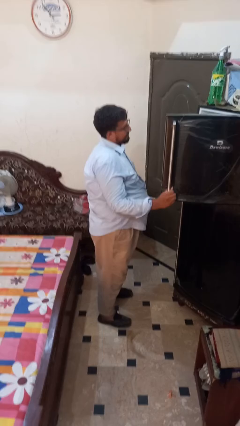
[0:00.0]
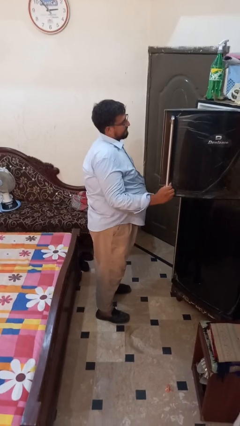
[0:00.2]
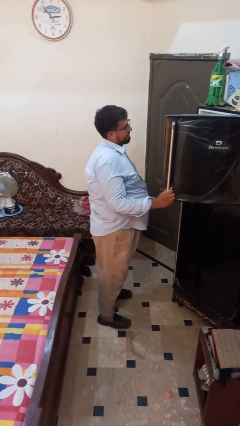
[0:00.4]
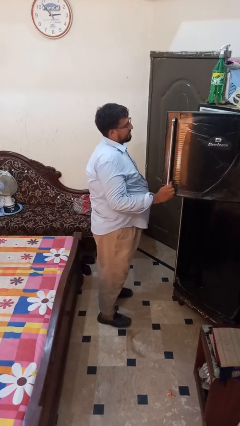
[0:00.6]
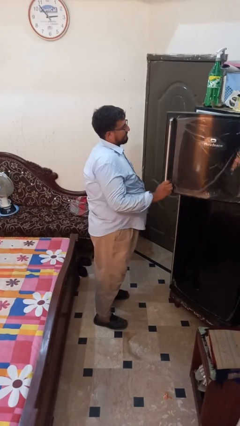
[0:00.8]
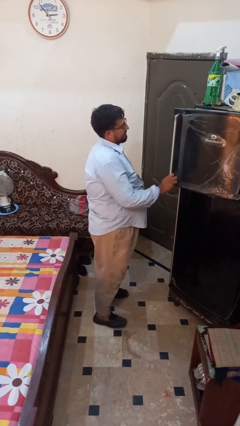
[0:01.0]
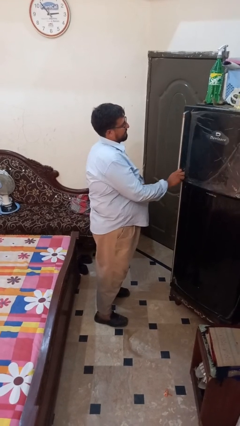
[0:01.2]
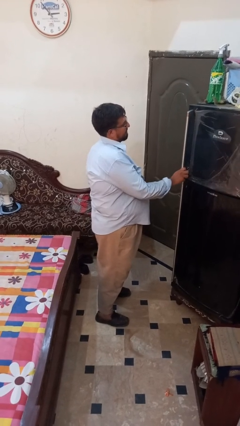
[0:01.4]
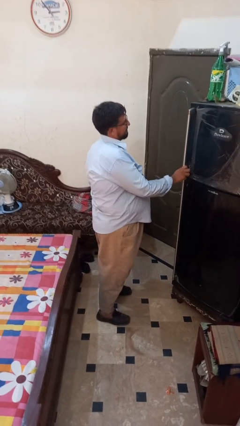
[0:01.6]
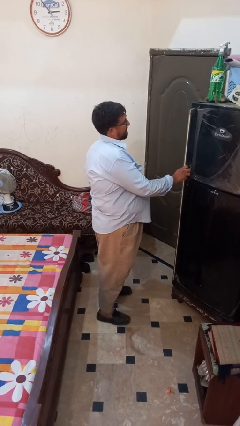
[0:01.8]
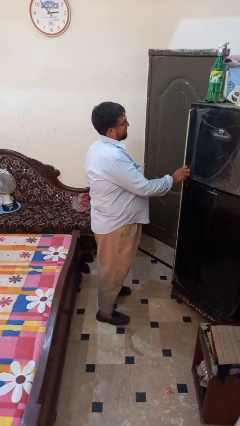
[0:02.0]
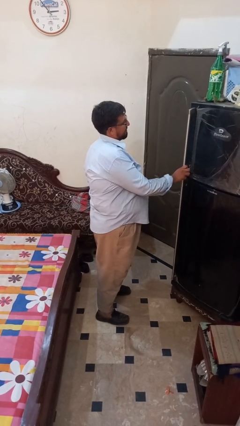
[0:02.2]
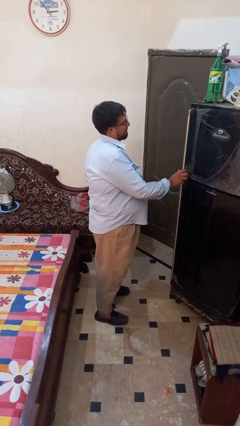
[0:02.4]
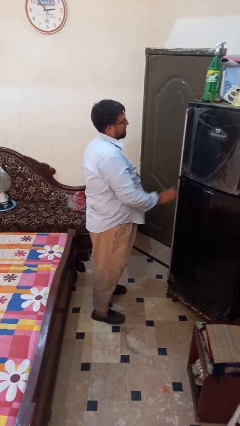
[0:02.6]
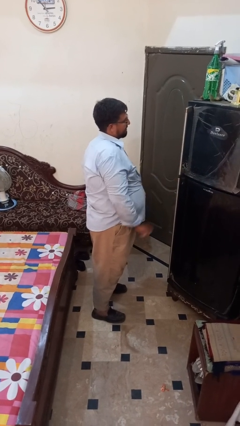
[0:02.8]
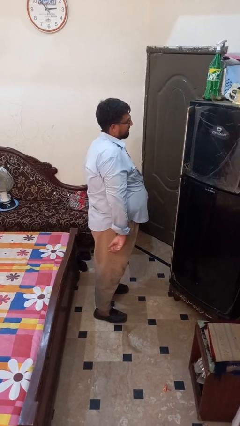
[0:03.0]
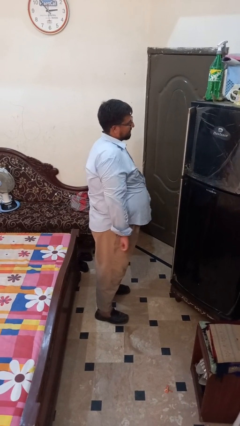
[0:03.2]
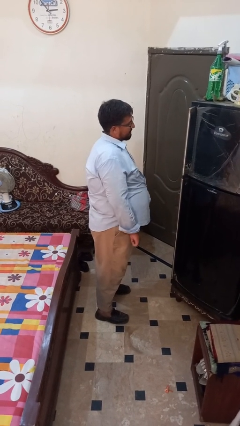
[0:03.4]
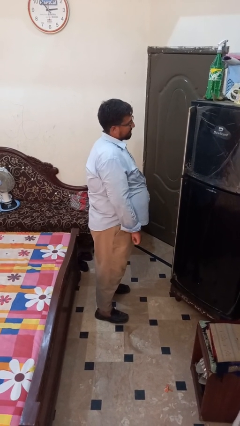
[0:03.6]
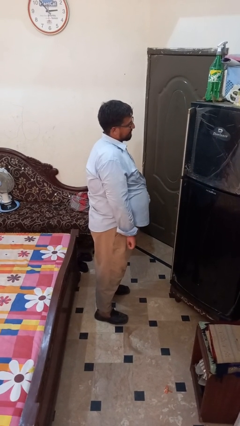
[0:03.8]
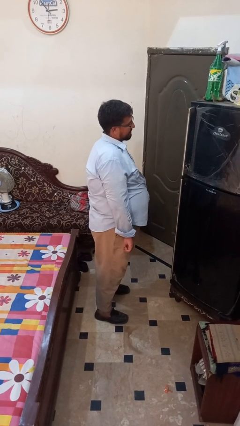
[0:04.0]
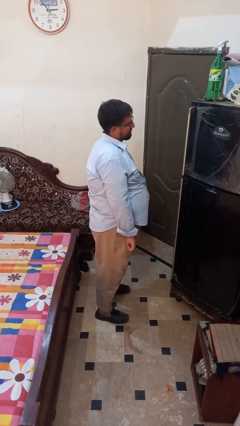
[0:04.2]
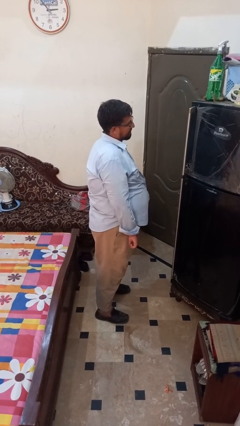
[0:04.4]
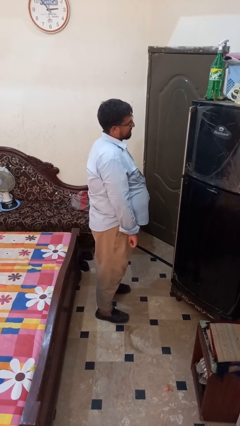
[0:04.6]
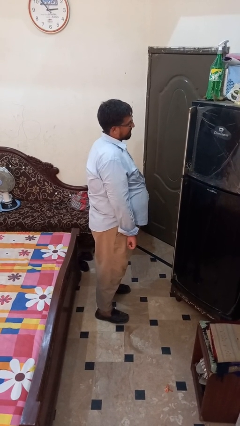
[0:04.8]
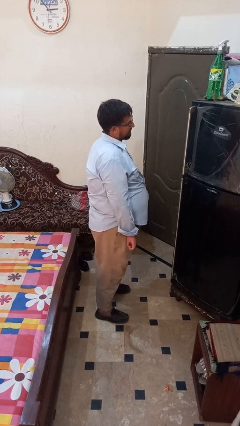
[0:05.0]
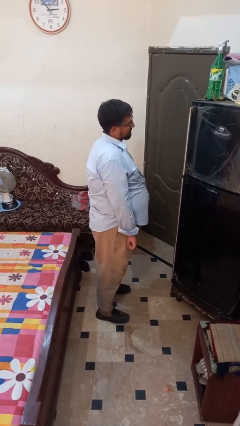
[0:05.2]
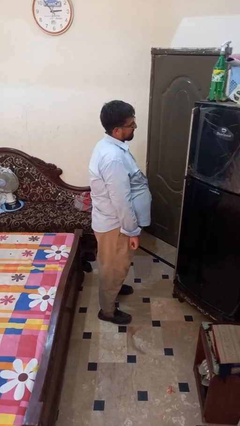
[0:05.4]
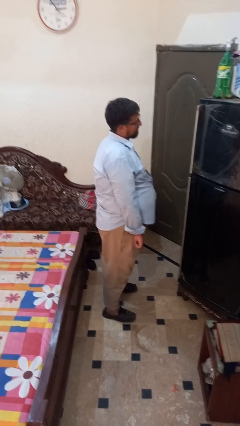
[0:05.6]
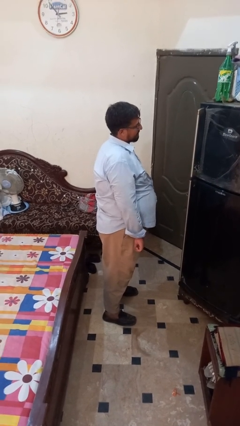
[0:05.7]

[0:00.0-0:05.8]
person closes refrigerator

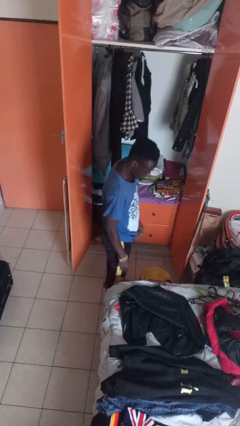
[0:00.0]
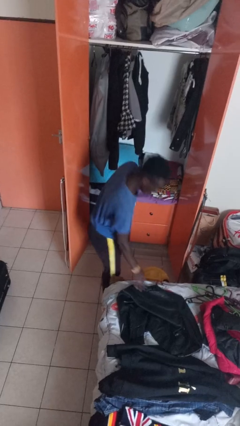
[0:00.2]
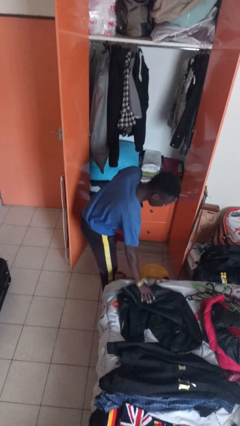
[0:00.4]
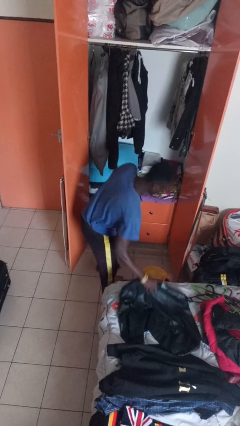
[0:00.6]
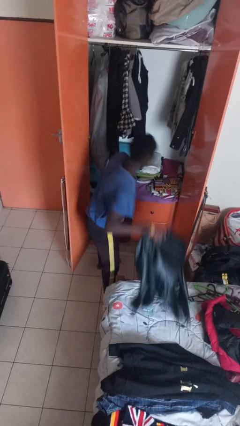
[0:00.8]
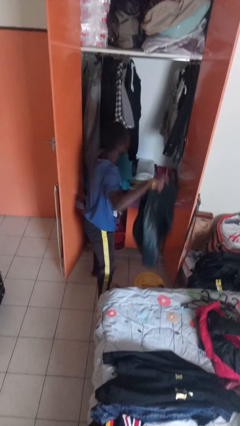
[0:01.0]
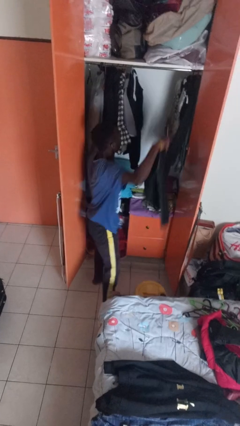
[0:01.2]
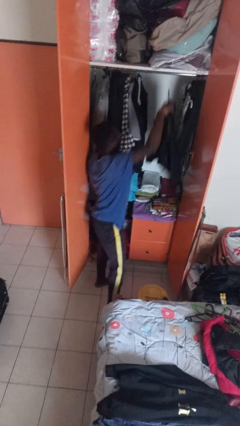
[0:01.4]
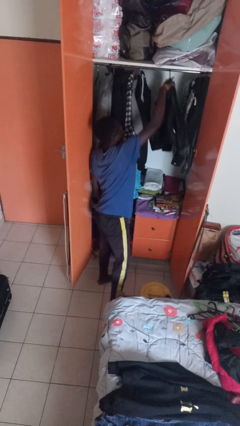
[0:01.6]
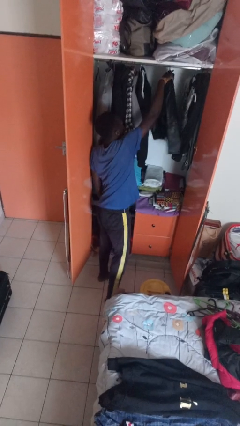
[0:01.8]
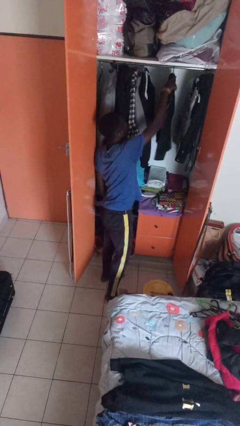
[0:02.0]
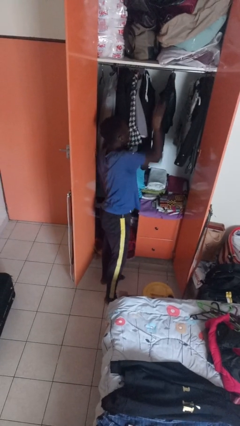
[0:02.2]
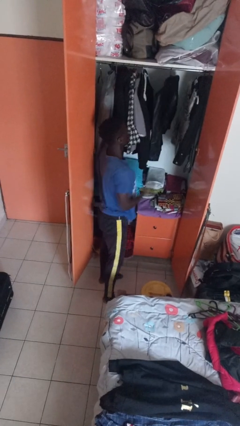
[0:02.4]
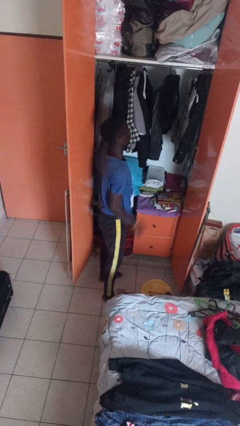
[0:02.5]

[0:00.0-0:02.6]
person puts clothes into closet

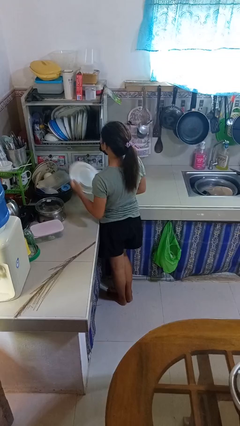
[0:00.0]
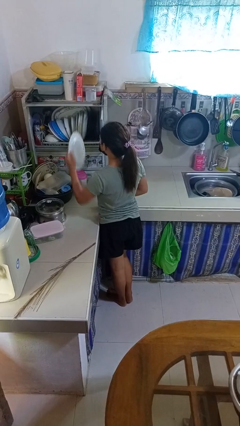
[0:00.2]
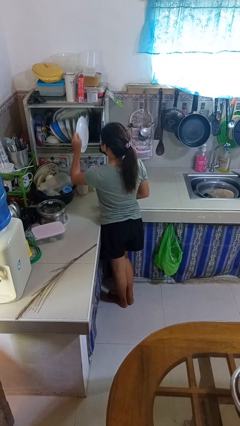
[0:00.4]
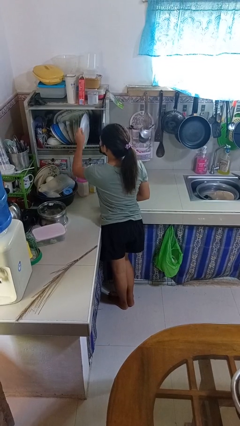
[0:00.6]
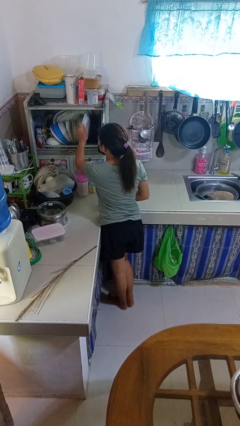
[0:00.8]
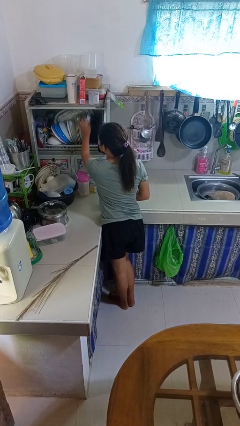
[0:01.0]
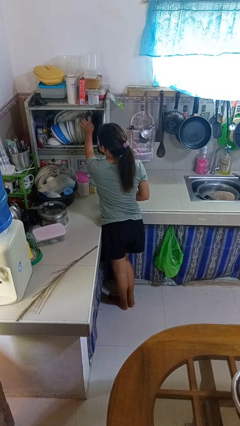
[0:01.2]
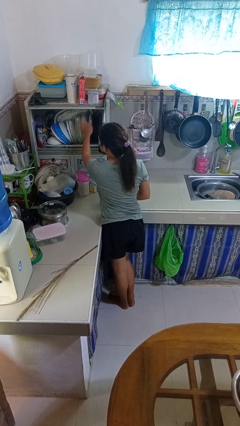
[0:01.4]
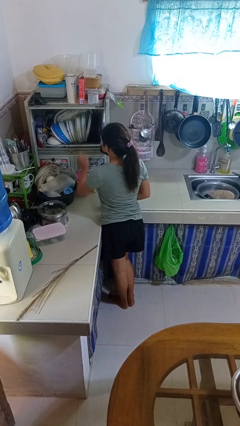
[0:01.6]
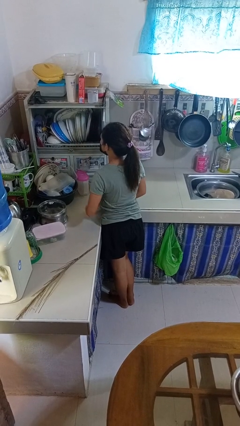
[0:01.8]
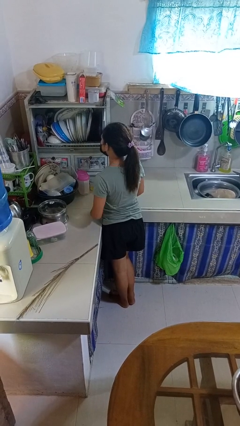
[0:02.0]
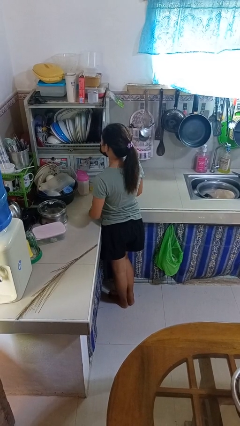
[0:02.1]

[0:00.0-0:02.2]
person puts object into kitchen drawer

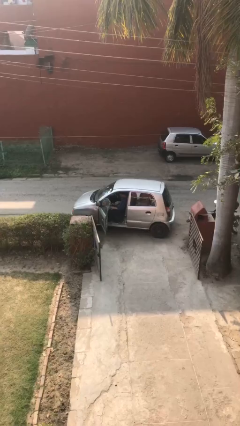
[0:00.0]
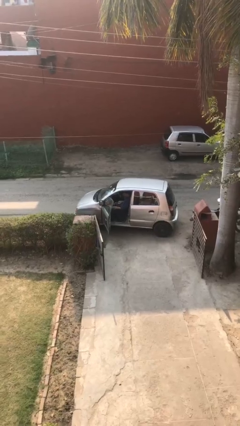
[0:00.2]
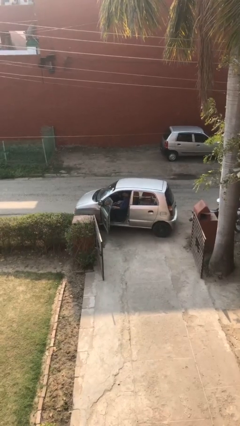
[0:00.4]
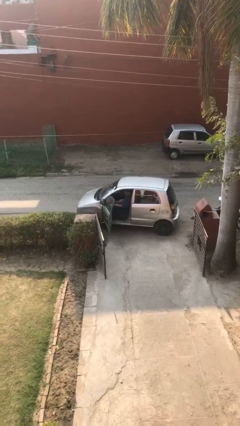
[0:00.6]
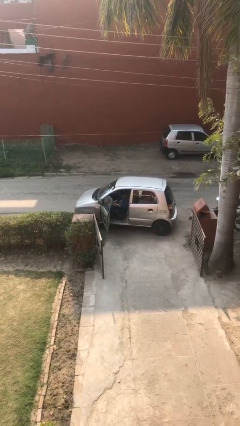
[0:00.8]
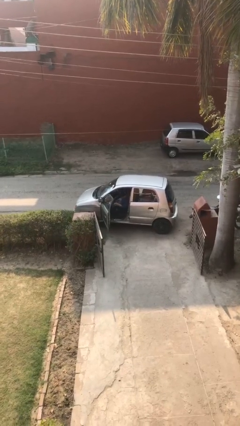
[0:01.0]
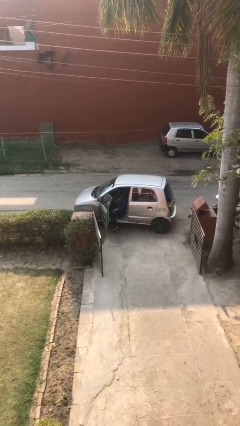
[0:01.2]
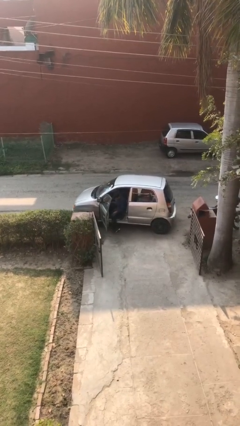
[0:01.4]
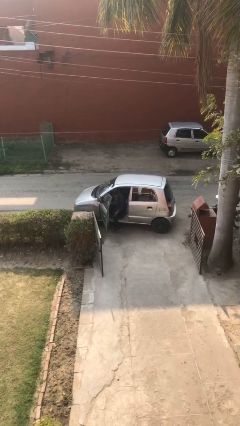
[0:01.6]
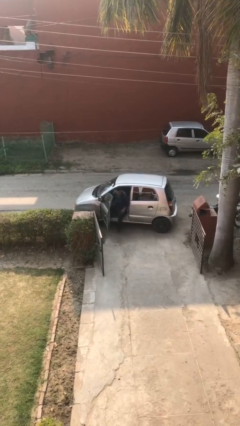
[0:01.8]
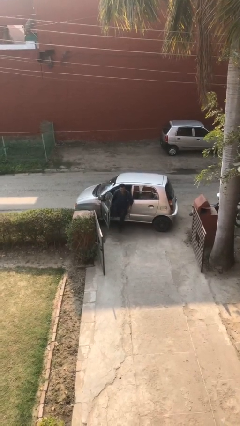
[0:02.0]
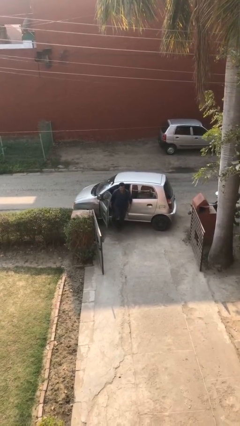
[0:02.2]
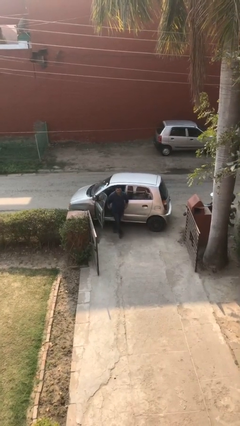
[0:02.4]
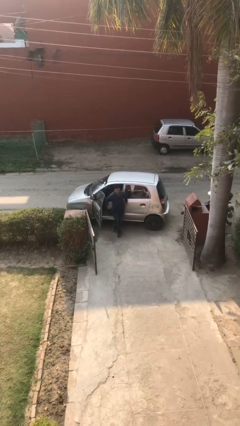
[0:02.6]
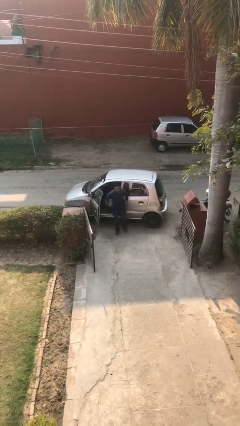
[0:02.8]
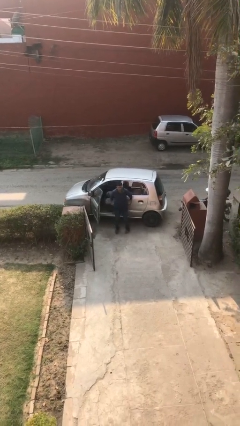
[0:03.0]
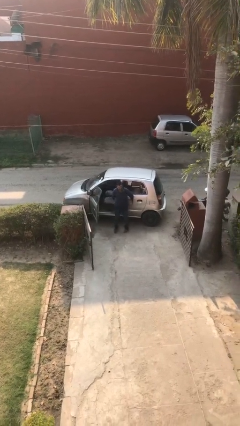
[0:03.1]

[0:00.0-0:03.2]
person exits car

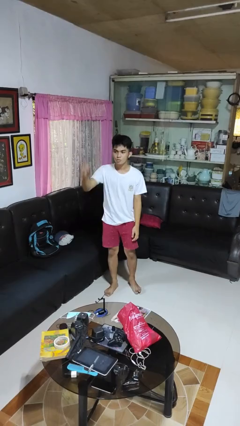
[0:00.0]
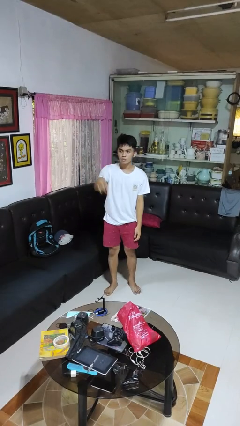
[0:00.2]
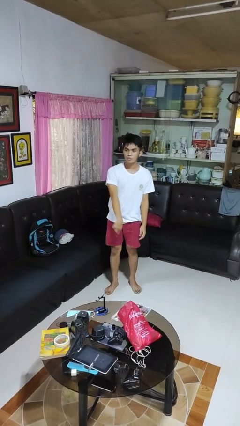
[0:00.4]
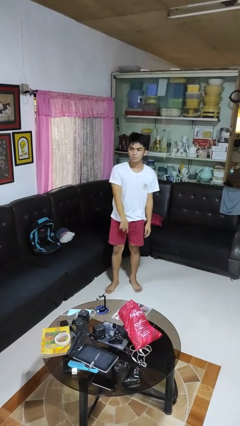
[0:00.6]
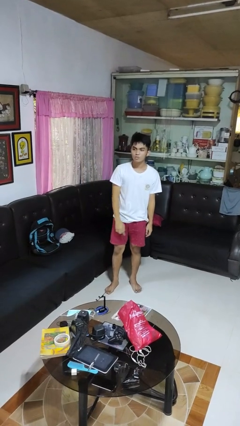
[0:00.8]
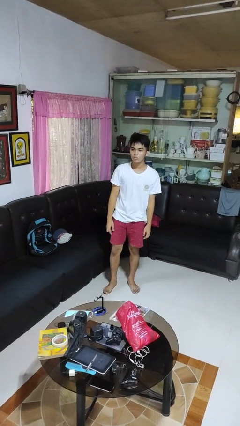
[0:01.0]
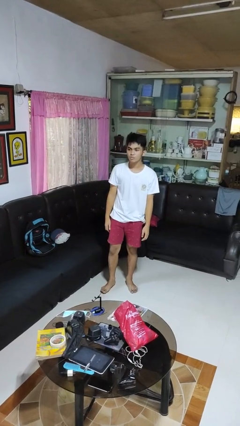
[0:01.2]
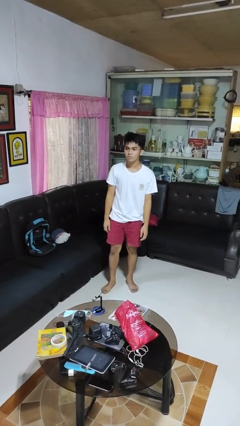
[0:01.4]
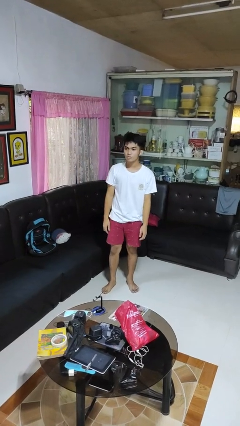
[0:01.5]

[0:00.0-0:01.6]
person gestures swipe down

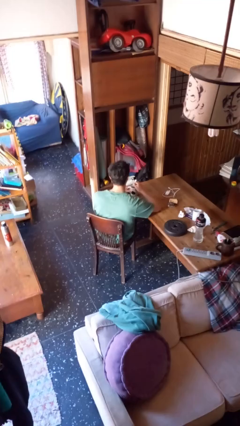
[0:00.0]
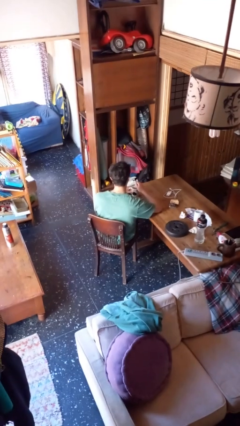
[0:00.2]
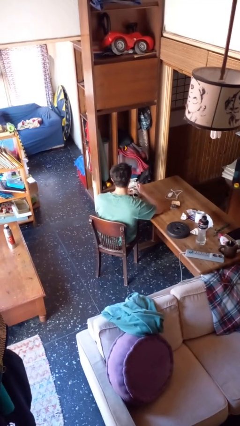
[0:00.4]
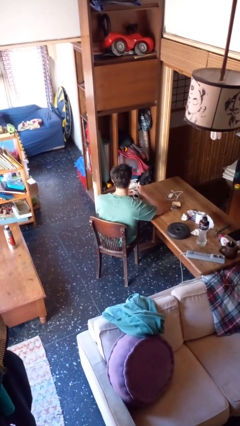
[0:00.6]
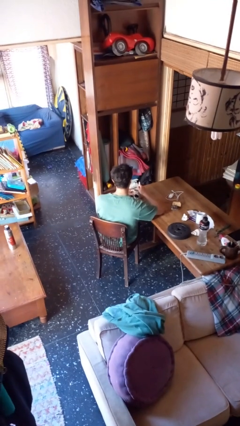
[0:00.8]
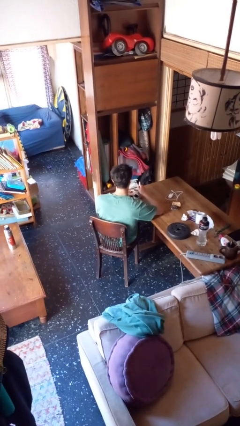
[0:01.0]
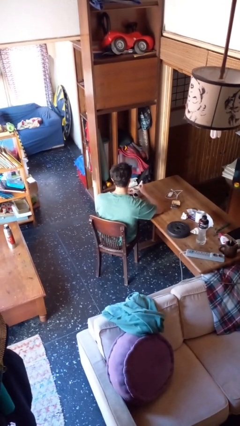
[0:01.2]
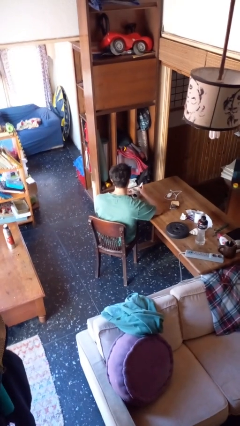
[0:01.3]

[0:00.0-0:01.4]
person stirs mug

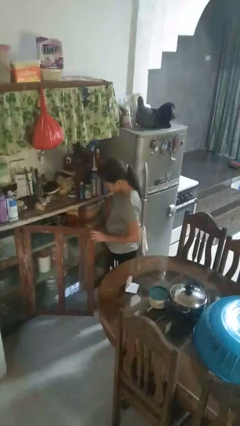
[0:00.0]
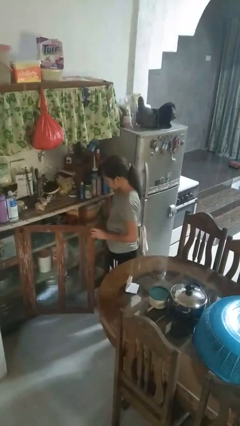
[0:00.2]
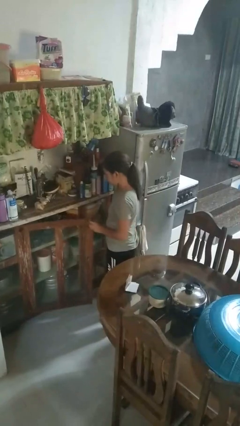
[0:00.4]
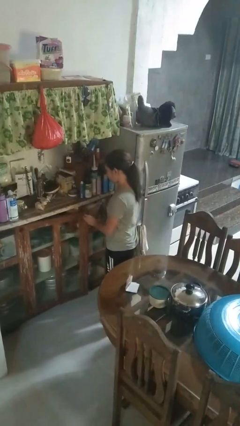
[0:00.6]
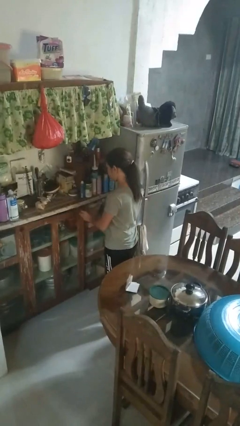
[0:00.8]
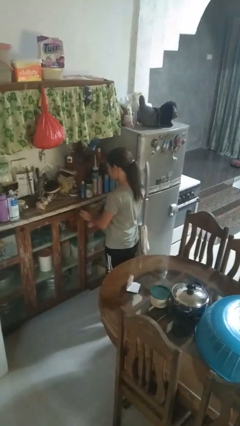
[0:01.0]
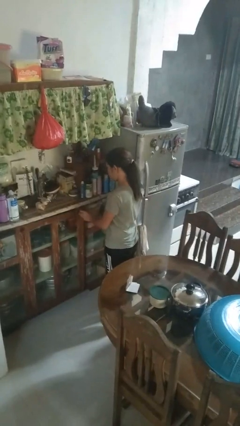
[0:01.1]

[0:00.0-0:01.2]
person closes cabinet
